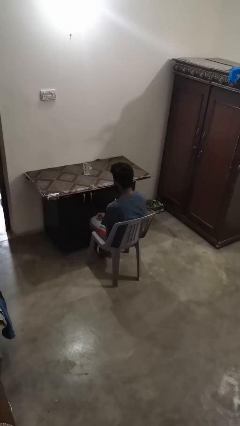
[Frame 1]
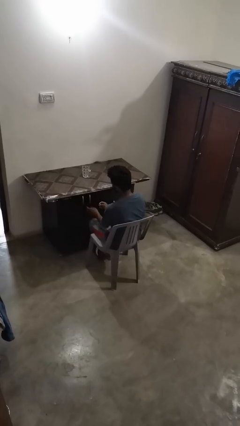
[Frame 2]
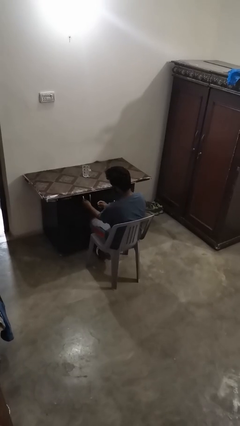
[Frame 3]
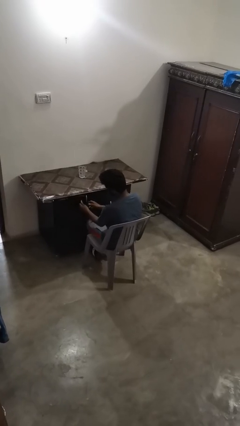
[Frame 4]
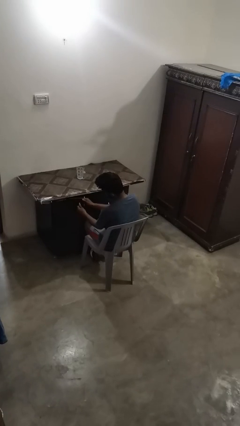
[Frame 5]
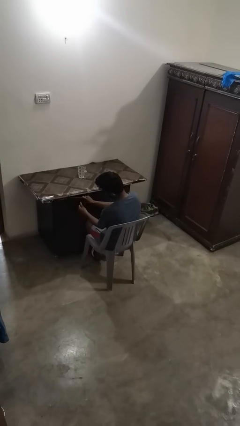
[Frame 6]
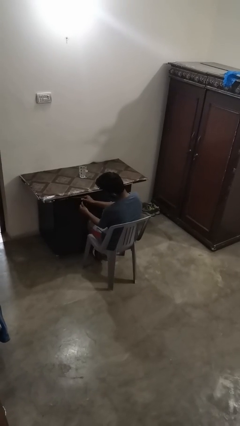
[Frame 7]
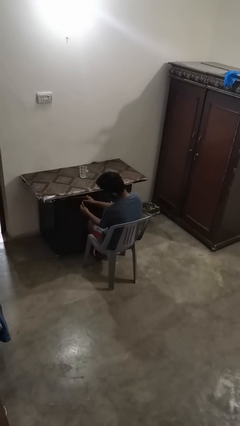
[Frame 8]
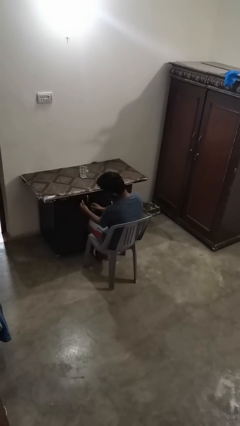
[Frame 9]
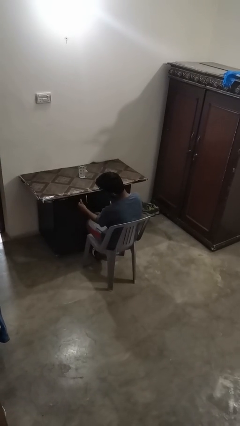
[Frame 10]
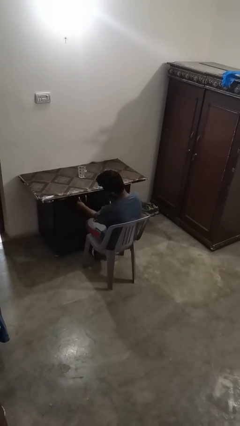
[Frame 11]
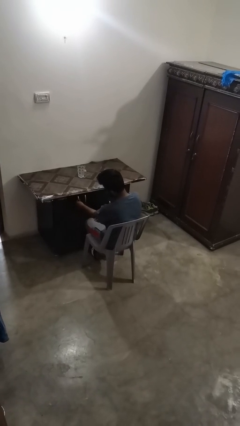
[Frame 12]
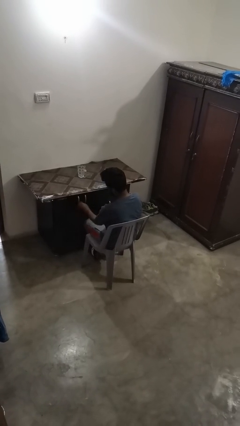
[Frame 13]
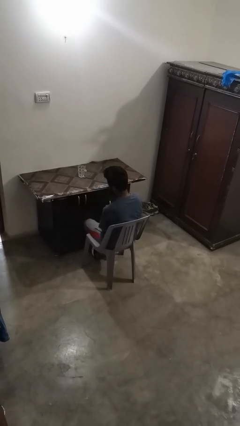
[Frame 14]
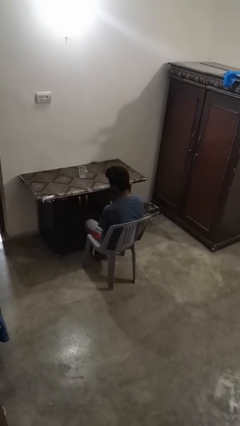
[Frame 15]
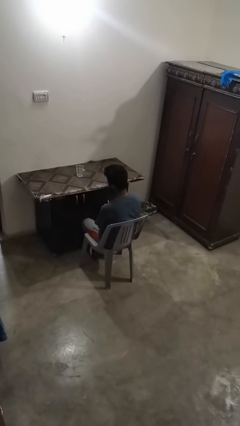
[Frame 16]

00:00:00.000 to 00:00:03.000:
person sets upright furniture

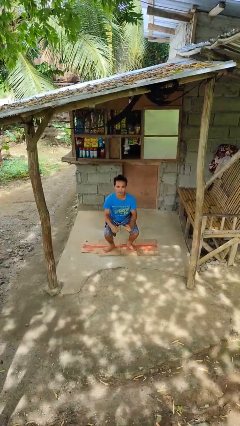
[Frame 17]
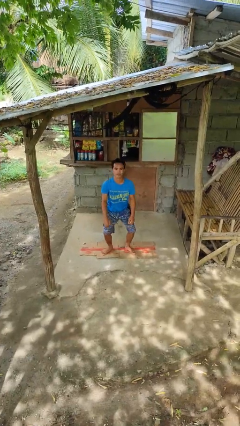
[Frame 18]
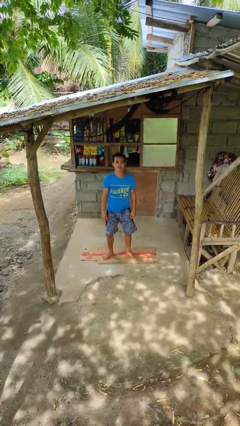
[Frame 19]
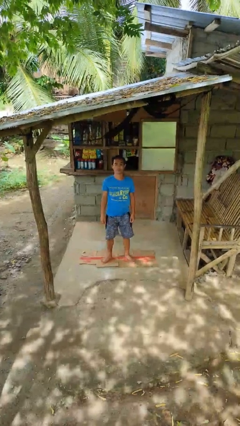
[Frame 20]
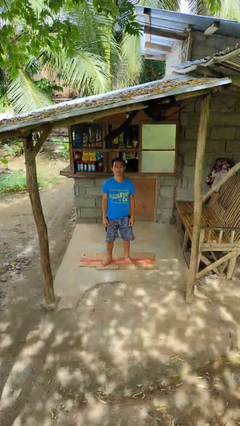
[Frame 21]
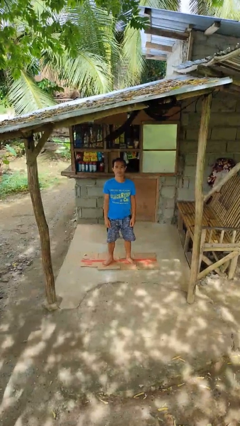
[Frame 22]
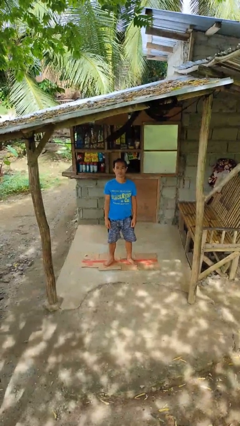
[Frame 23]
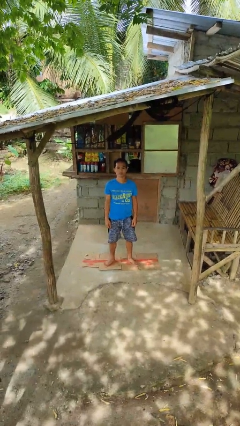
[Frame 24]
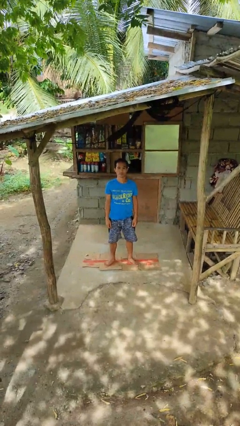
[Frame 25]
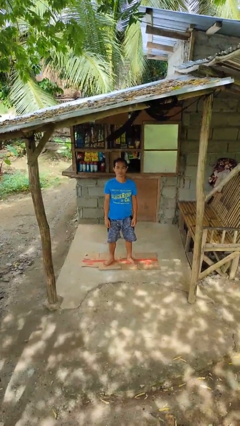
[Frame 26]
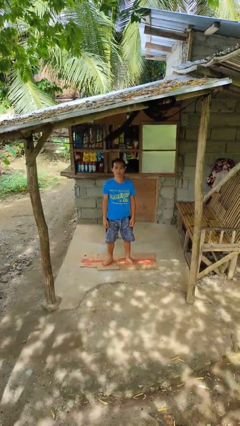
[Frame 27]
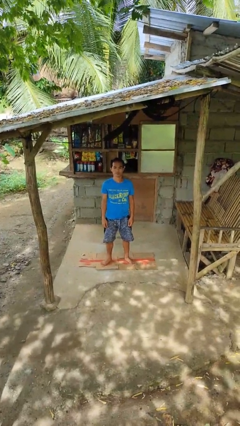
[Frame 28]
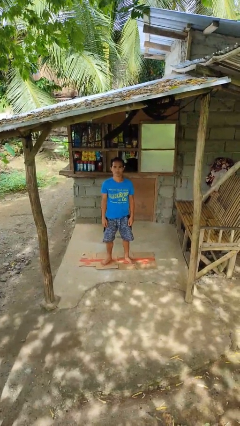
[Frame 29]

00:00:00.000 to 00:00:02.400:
person stands up

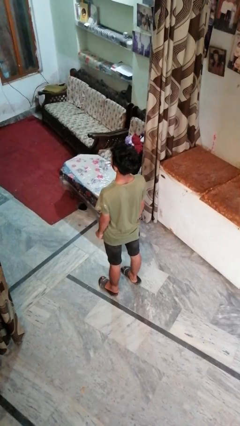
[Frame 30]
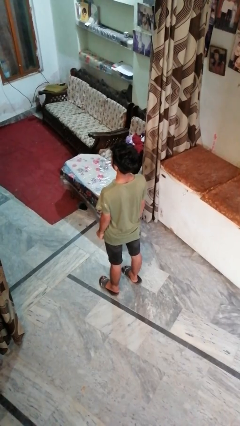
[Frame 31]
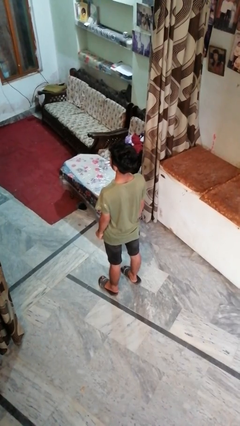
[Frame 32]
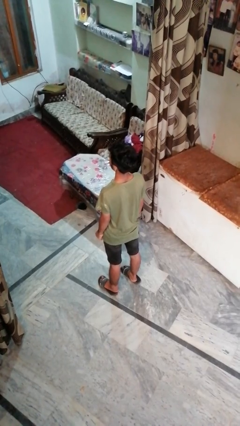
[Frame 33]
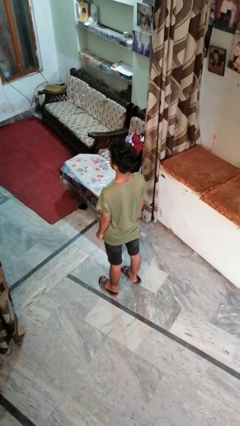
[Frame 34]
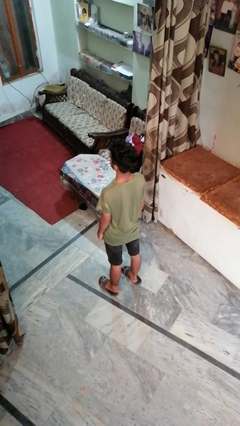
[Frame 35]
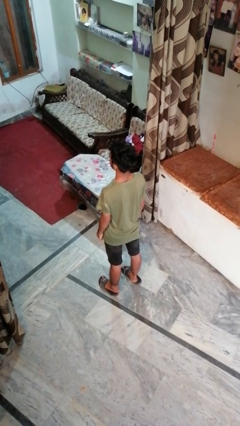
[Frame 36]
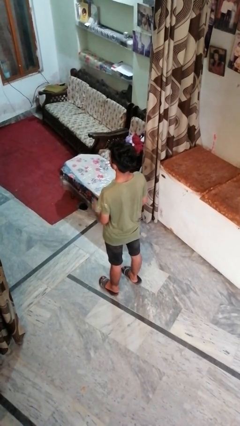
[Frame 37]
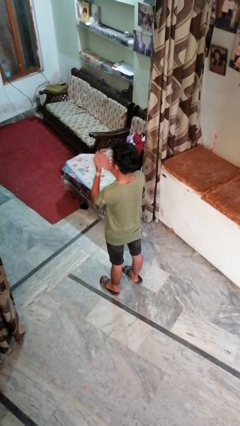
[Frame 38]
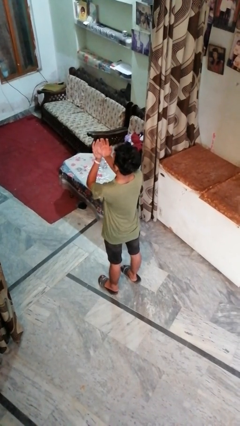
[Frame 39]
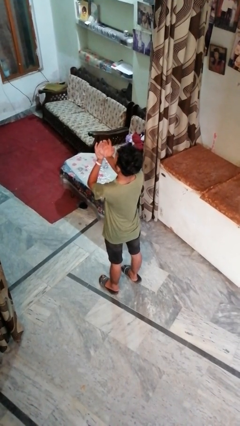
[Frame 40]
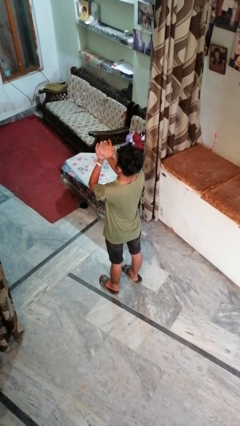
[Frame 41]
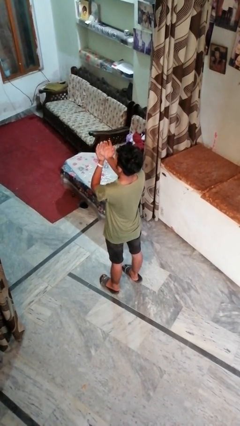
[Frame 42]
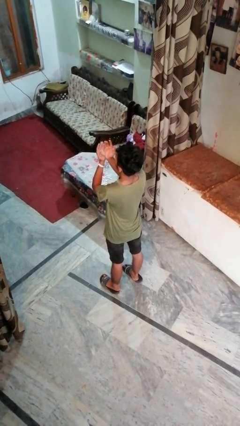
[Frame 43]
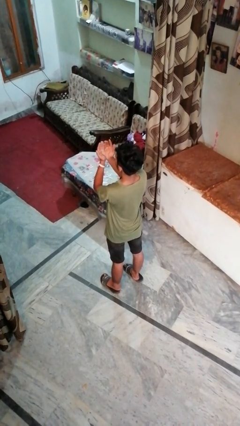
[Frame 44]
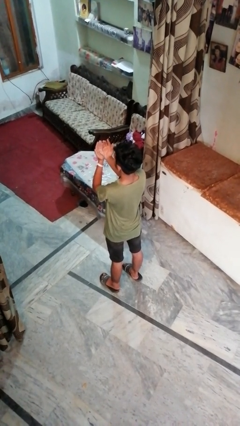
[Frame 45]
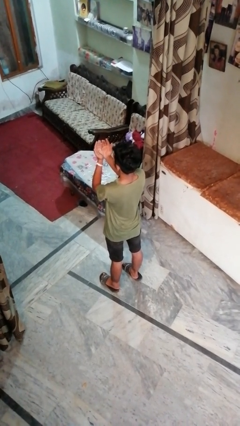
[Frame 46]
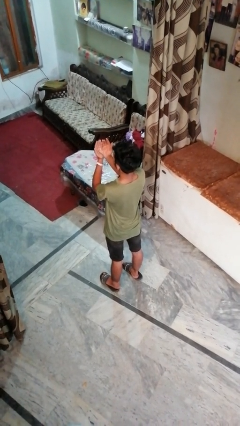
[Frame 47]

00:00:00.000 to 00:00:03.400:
person prays

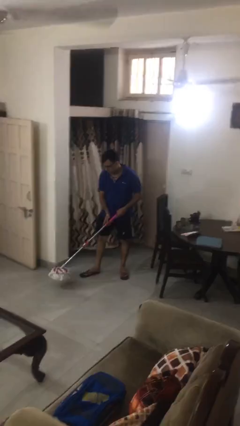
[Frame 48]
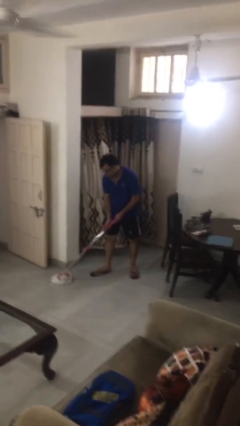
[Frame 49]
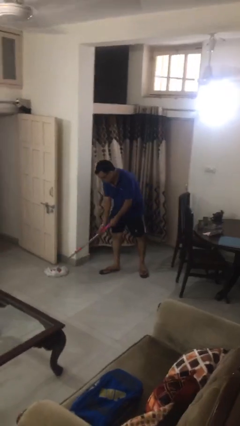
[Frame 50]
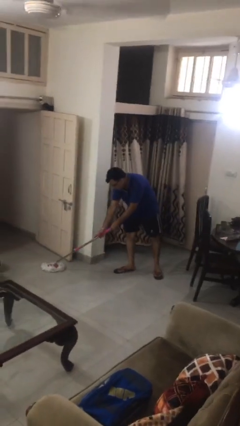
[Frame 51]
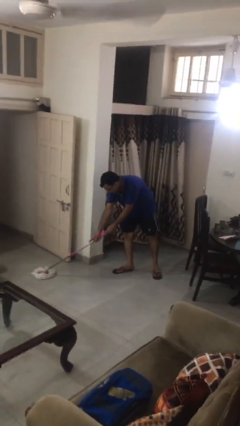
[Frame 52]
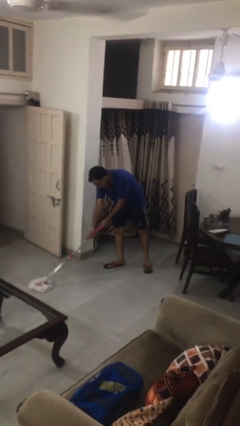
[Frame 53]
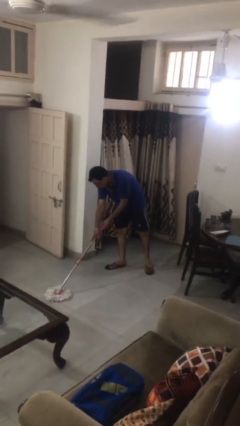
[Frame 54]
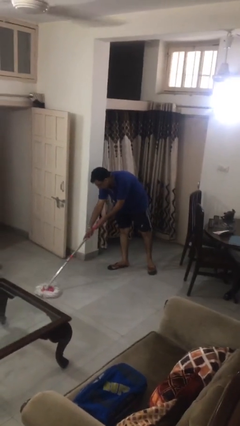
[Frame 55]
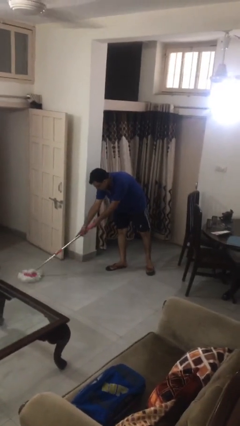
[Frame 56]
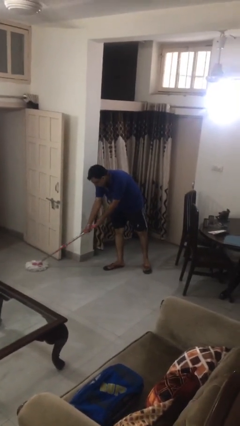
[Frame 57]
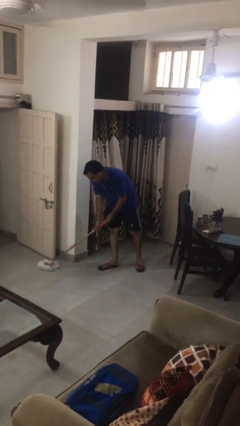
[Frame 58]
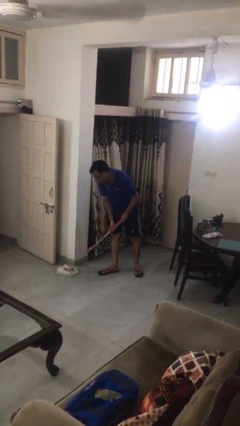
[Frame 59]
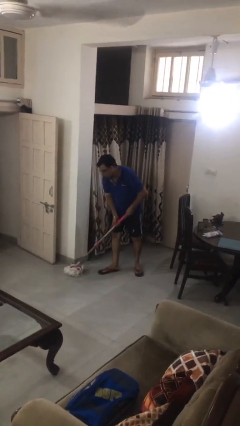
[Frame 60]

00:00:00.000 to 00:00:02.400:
person mops

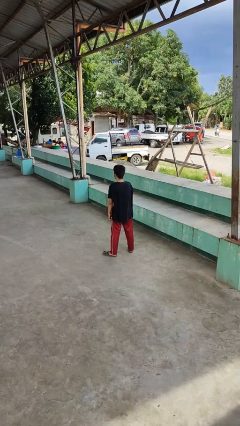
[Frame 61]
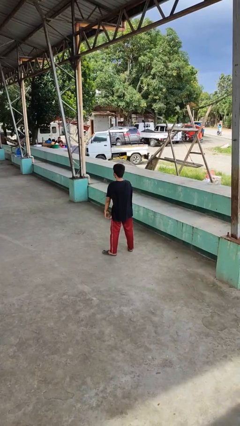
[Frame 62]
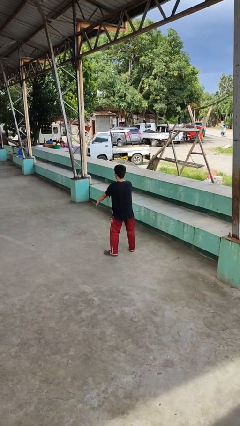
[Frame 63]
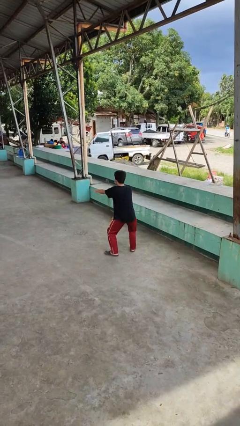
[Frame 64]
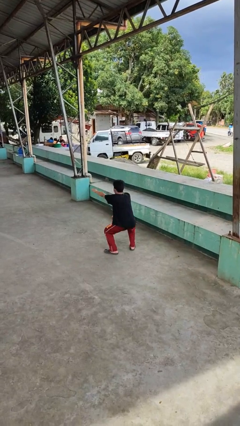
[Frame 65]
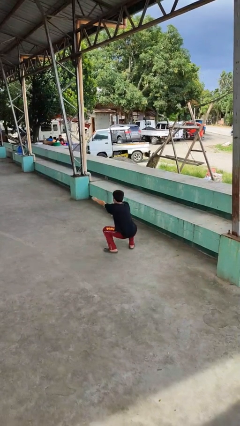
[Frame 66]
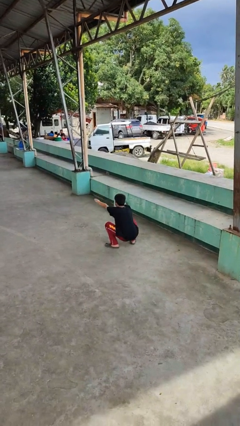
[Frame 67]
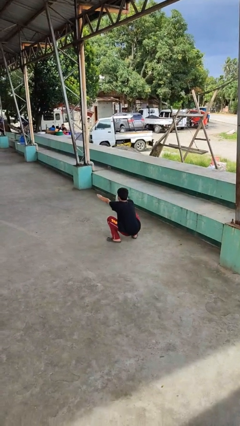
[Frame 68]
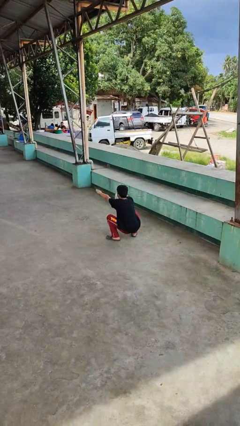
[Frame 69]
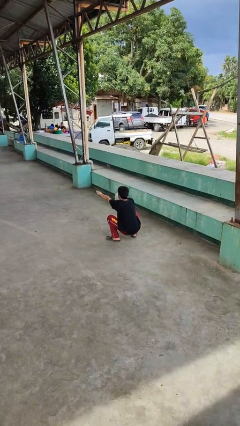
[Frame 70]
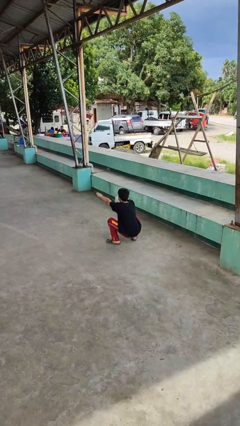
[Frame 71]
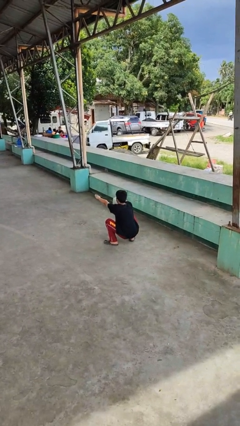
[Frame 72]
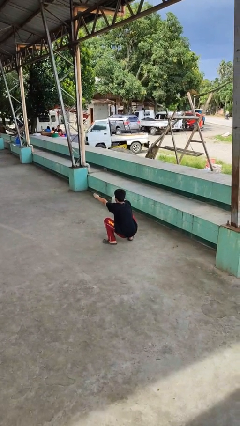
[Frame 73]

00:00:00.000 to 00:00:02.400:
person squats

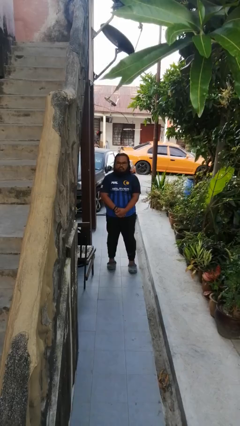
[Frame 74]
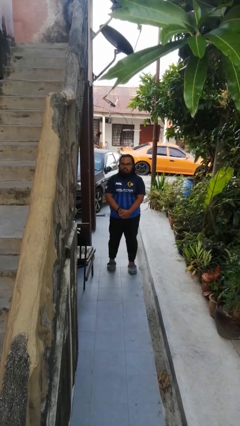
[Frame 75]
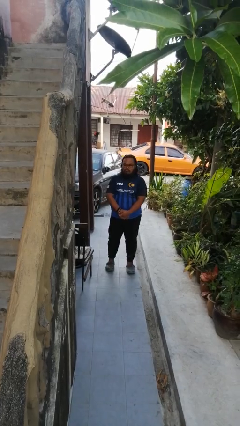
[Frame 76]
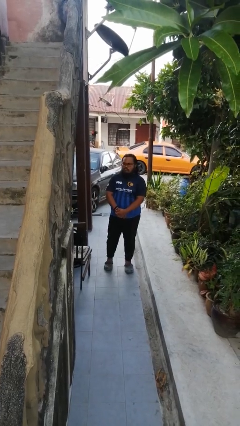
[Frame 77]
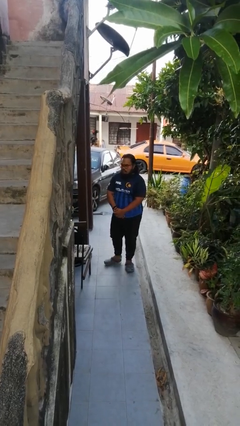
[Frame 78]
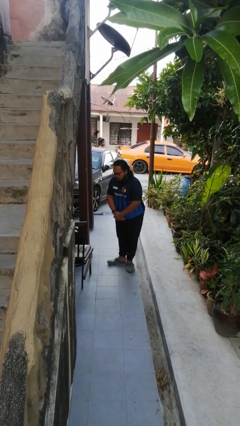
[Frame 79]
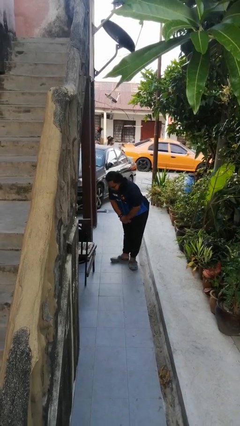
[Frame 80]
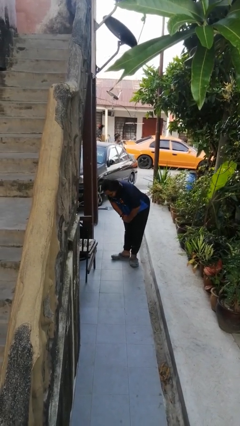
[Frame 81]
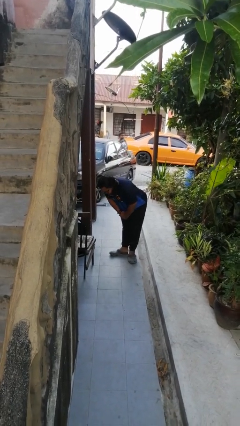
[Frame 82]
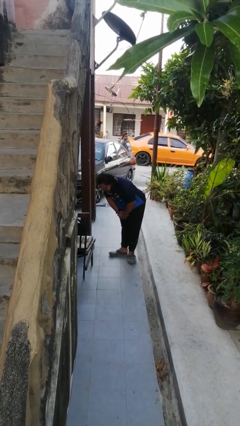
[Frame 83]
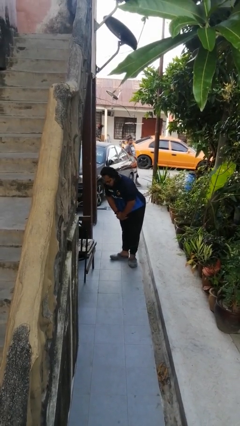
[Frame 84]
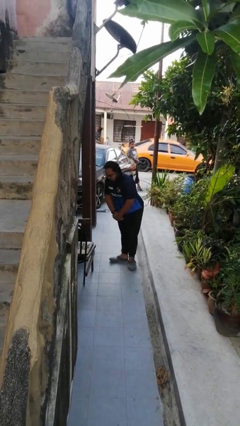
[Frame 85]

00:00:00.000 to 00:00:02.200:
person bows

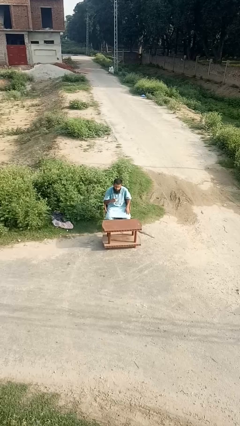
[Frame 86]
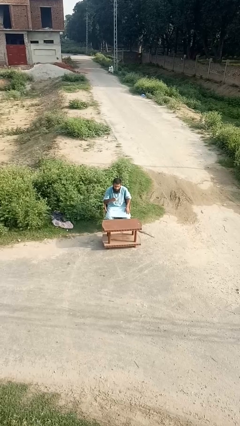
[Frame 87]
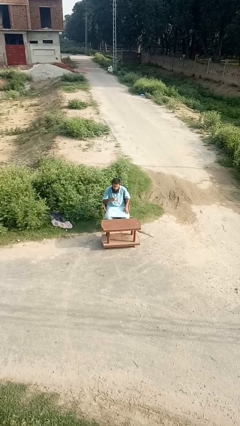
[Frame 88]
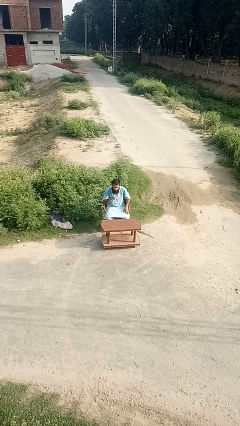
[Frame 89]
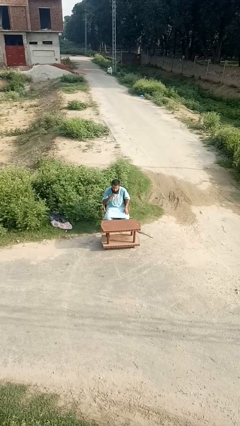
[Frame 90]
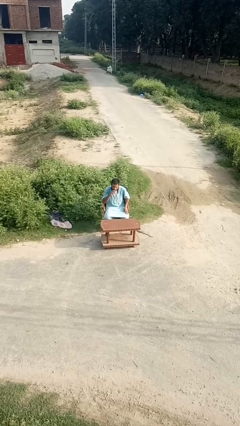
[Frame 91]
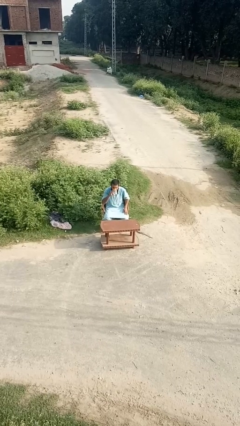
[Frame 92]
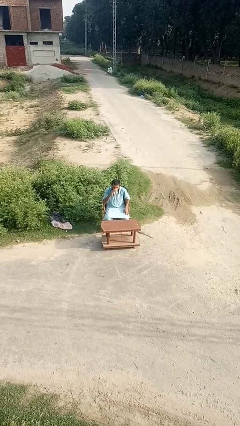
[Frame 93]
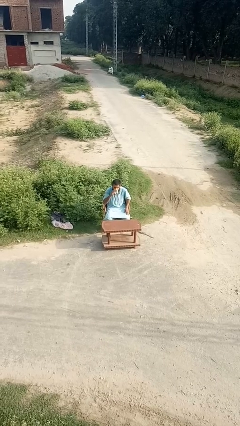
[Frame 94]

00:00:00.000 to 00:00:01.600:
person drinks from mug
